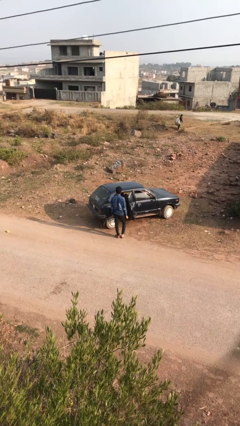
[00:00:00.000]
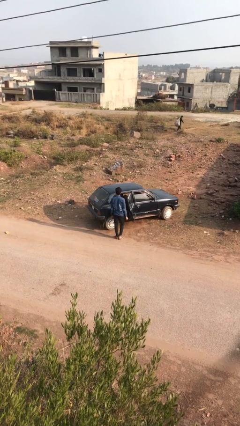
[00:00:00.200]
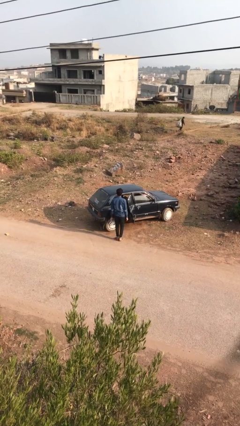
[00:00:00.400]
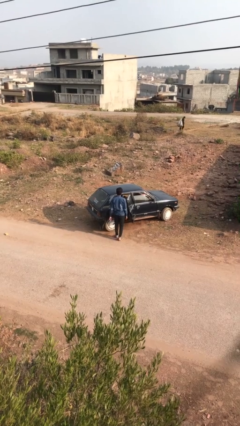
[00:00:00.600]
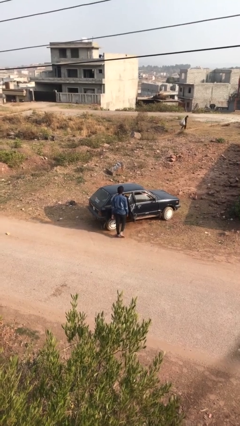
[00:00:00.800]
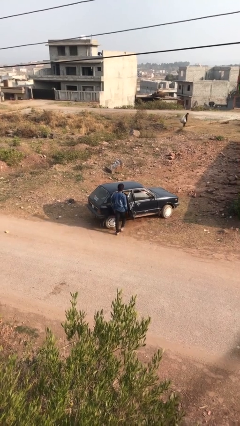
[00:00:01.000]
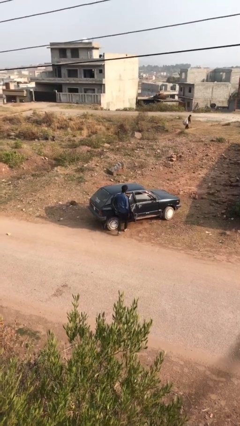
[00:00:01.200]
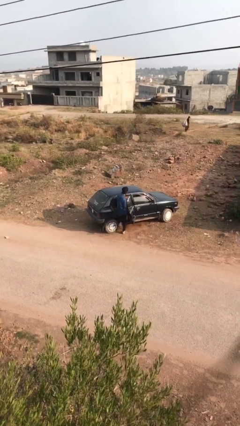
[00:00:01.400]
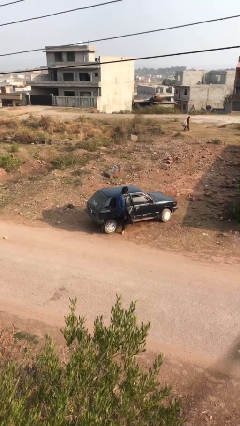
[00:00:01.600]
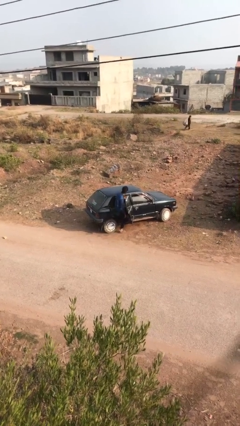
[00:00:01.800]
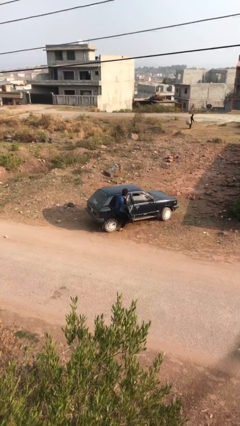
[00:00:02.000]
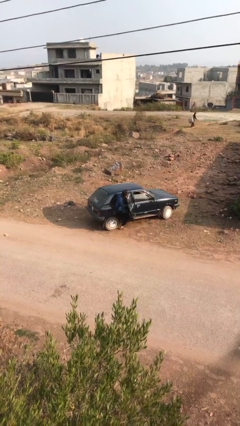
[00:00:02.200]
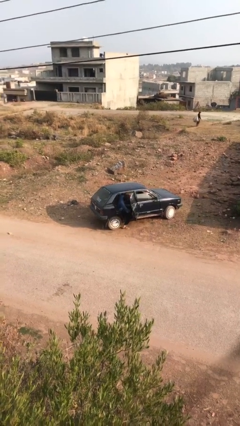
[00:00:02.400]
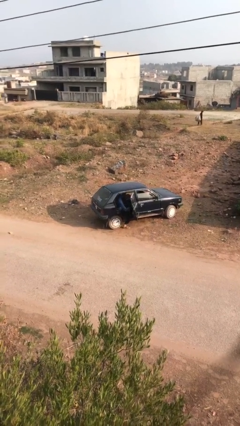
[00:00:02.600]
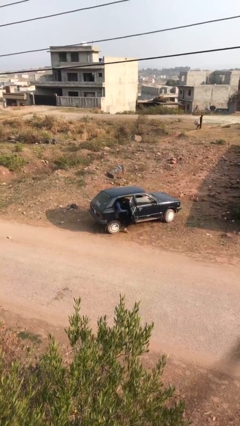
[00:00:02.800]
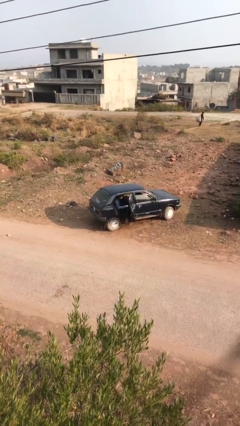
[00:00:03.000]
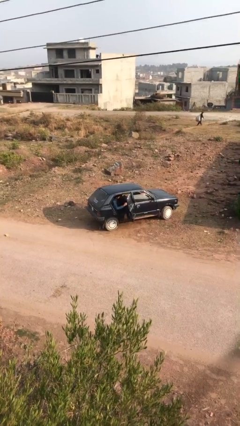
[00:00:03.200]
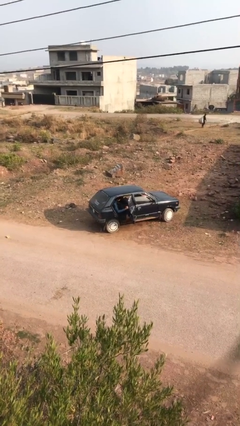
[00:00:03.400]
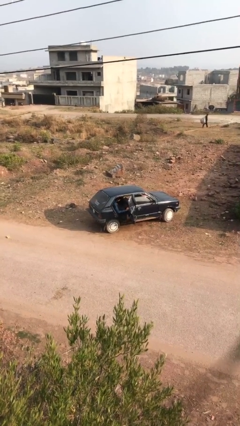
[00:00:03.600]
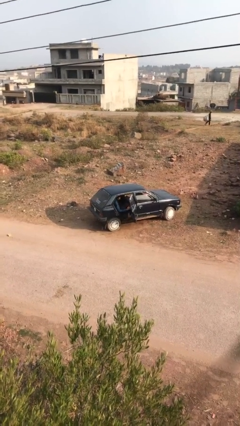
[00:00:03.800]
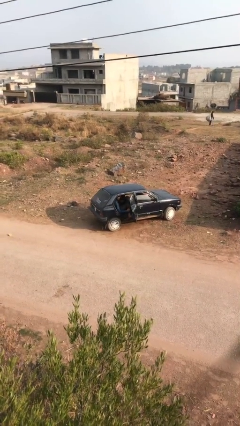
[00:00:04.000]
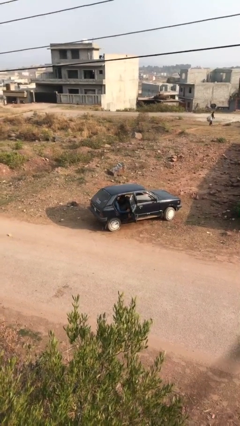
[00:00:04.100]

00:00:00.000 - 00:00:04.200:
person enters car

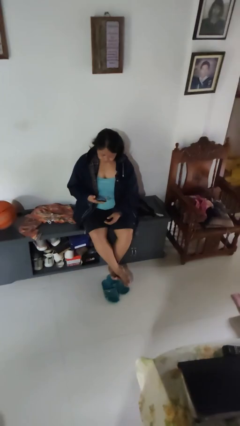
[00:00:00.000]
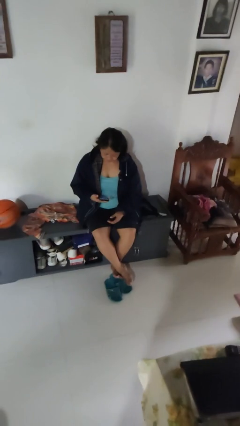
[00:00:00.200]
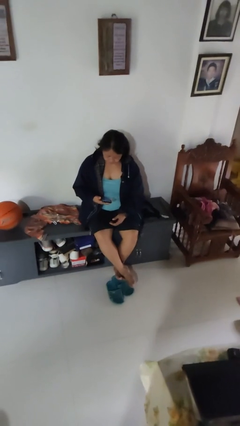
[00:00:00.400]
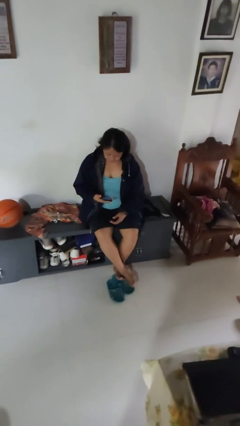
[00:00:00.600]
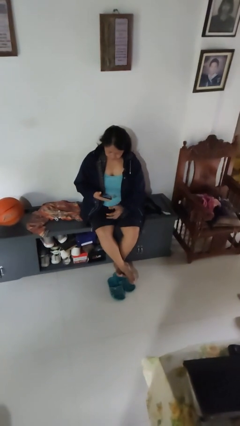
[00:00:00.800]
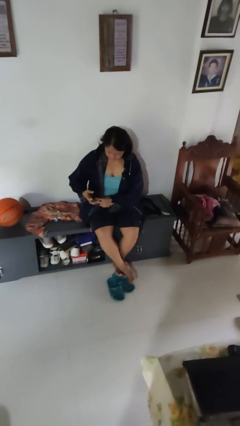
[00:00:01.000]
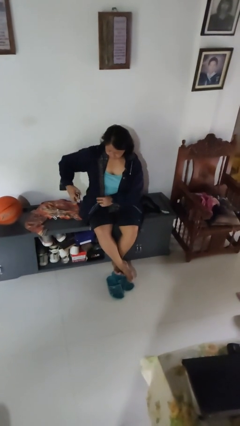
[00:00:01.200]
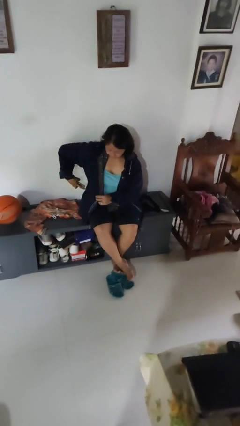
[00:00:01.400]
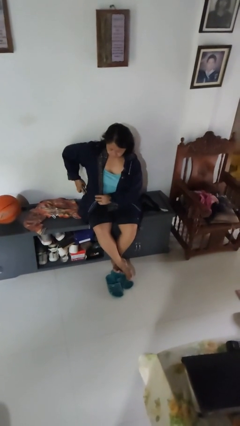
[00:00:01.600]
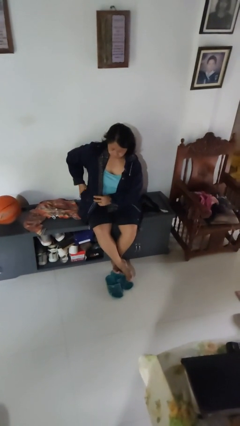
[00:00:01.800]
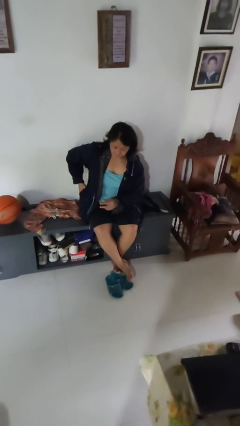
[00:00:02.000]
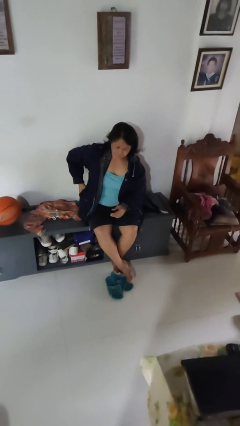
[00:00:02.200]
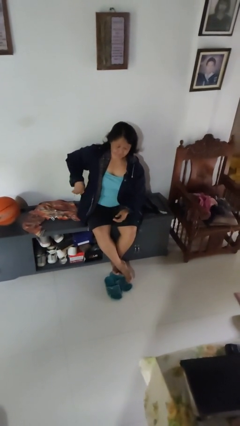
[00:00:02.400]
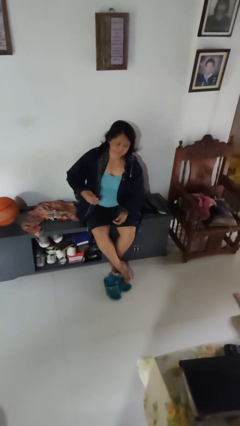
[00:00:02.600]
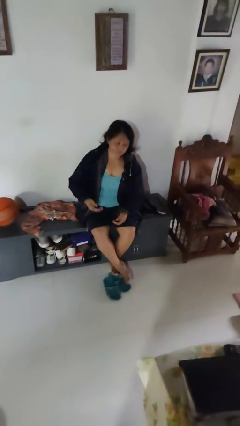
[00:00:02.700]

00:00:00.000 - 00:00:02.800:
person puts phone into pocket

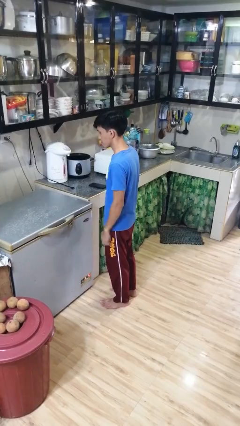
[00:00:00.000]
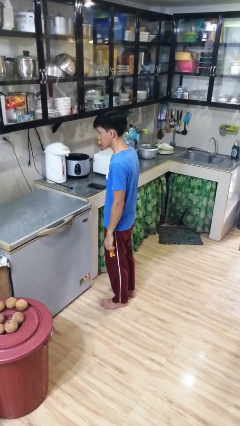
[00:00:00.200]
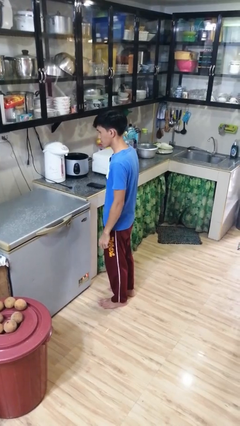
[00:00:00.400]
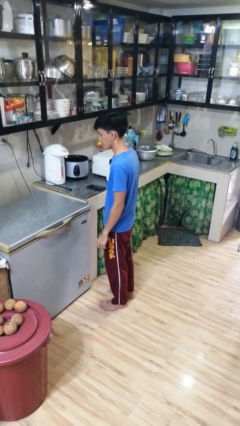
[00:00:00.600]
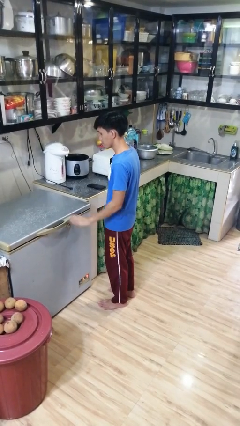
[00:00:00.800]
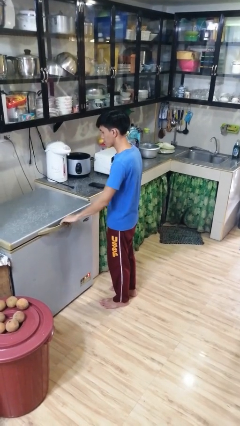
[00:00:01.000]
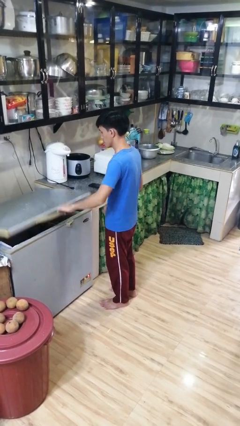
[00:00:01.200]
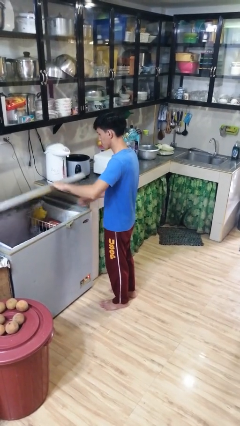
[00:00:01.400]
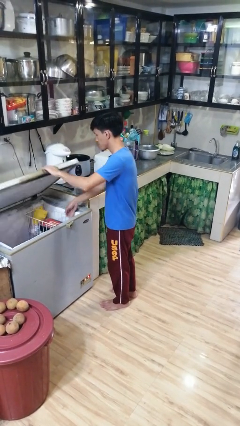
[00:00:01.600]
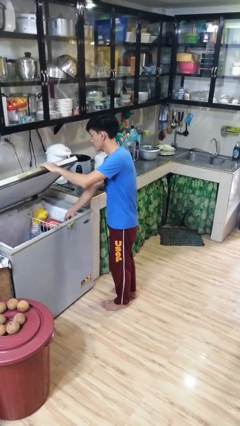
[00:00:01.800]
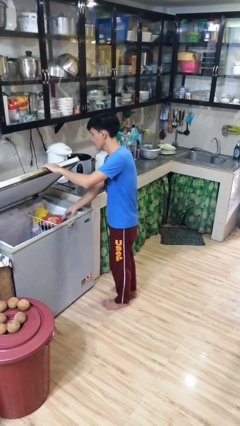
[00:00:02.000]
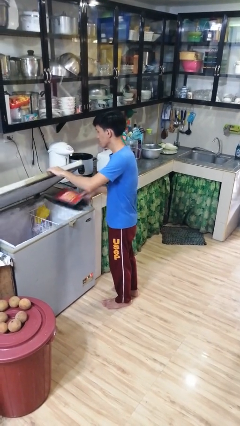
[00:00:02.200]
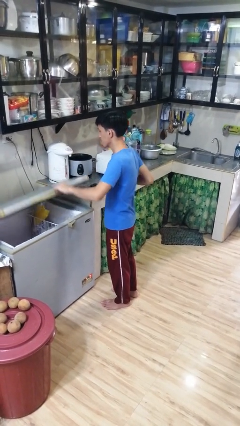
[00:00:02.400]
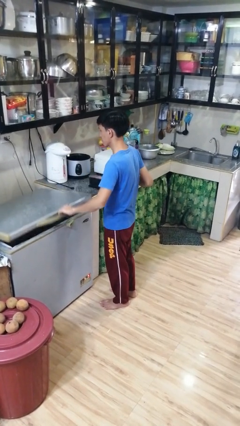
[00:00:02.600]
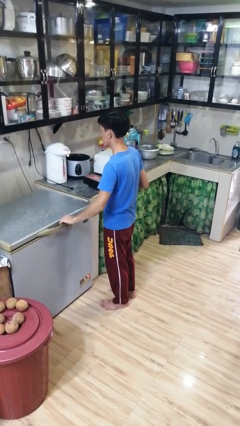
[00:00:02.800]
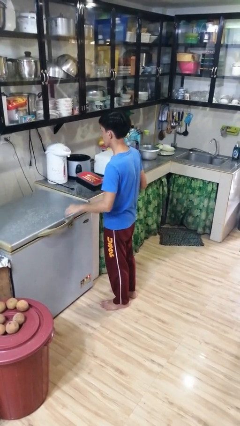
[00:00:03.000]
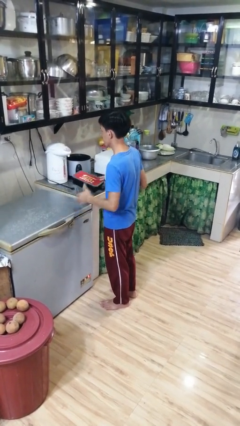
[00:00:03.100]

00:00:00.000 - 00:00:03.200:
person takes object from refrigerator

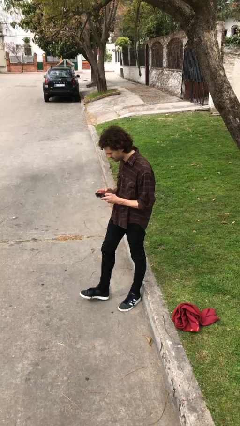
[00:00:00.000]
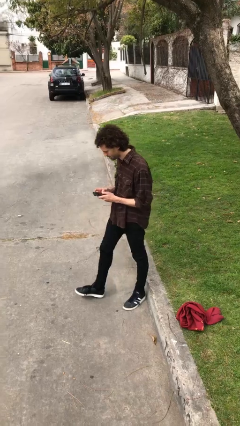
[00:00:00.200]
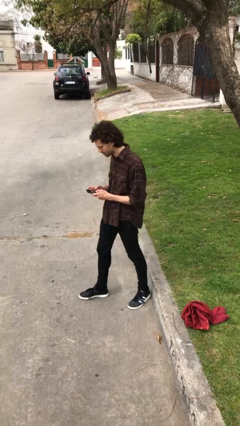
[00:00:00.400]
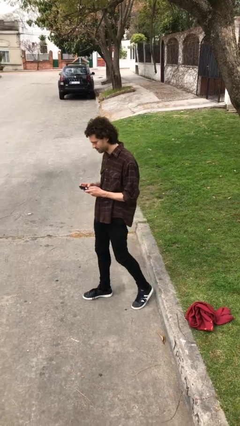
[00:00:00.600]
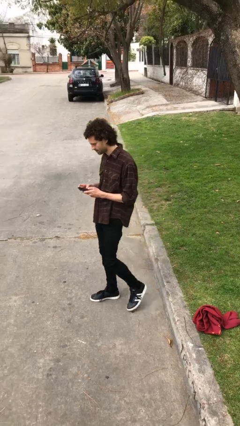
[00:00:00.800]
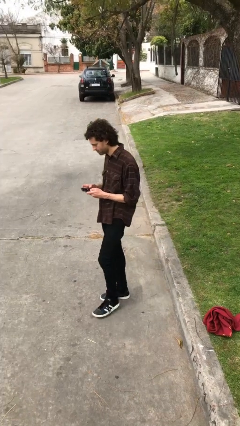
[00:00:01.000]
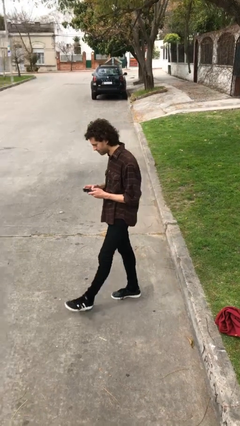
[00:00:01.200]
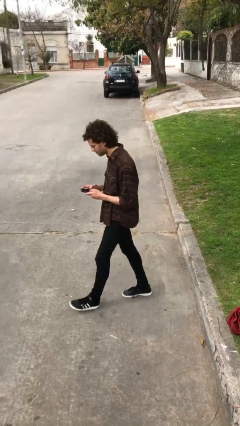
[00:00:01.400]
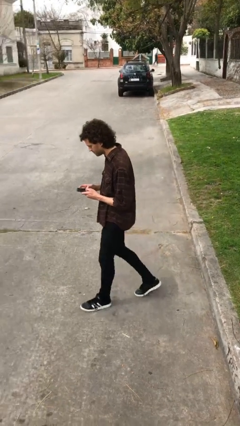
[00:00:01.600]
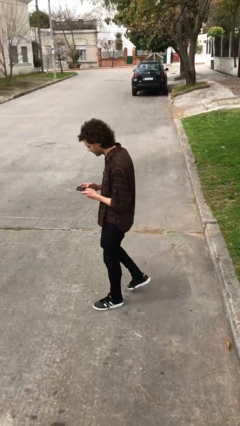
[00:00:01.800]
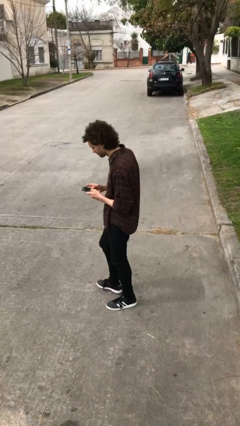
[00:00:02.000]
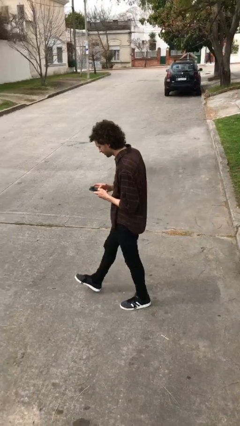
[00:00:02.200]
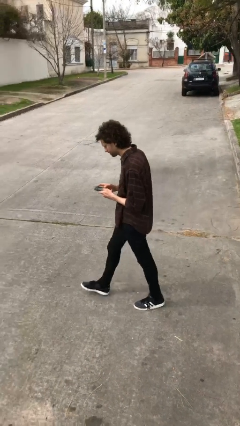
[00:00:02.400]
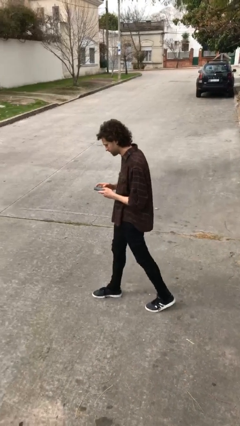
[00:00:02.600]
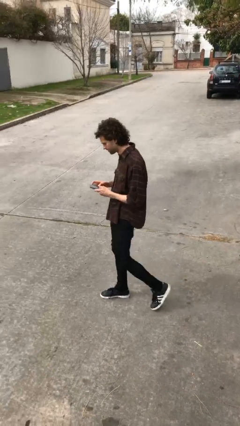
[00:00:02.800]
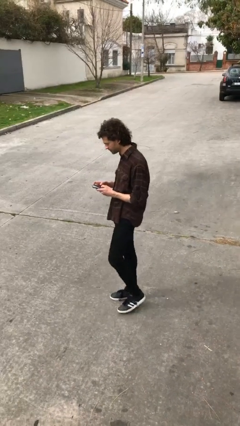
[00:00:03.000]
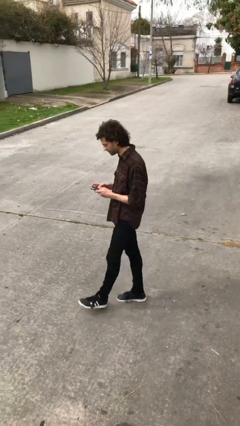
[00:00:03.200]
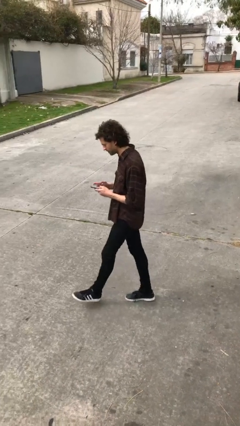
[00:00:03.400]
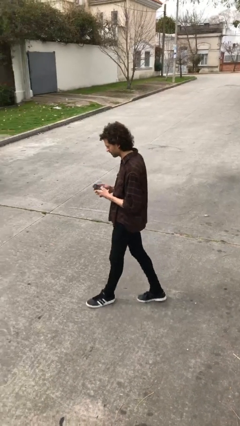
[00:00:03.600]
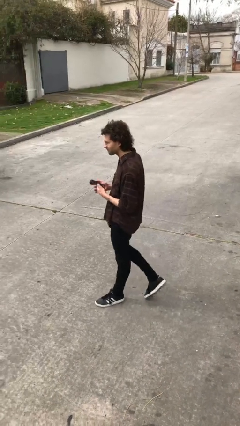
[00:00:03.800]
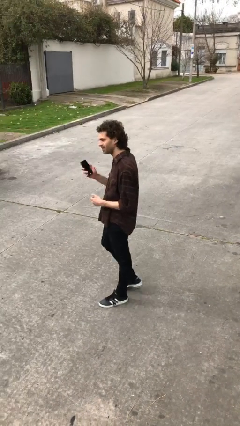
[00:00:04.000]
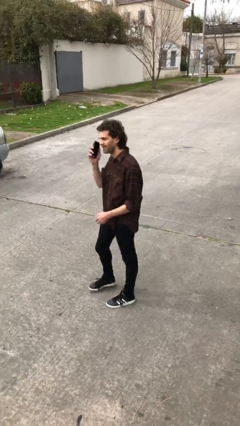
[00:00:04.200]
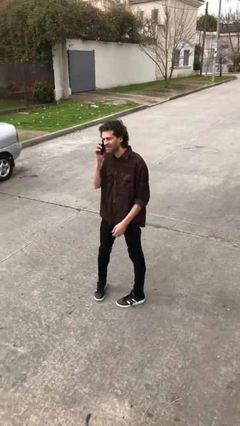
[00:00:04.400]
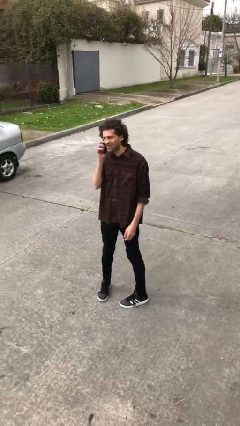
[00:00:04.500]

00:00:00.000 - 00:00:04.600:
person texts on phone

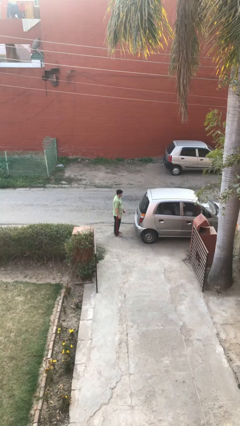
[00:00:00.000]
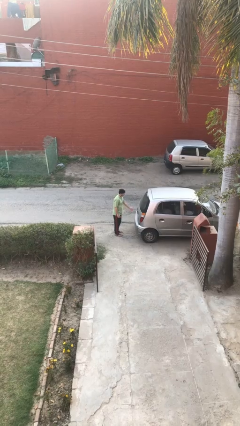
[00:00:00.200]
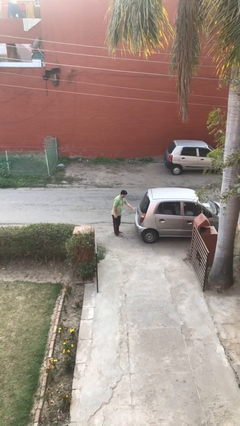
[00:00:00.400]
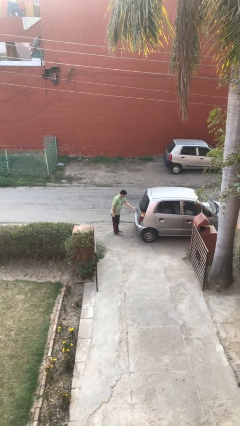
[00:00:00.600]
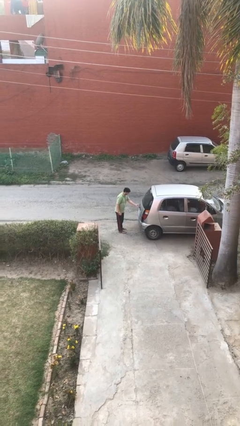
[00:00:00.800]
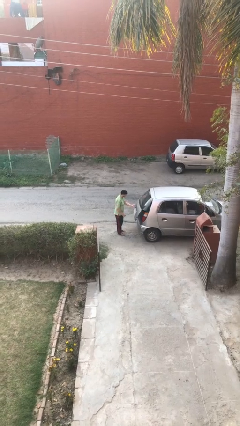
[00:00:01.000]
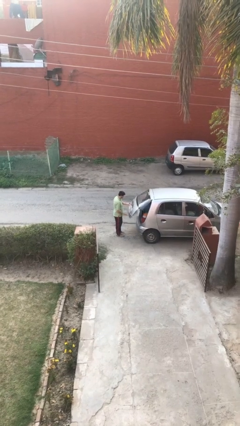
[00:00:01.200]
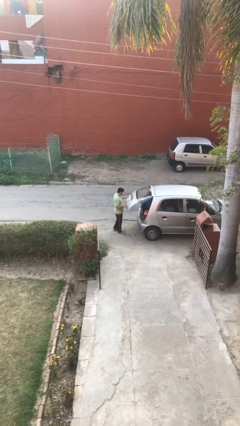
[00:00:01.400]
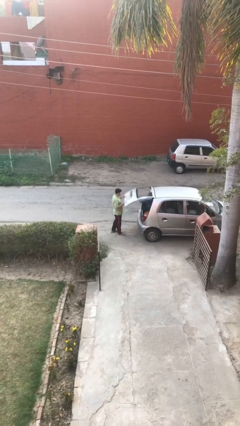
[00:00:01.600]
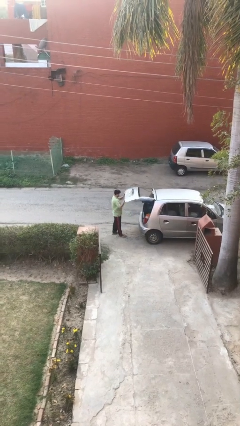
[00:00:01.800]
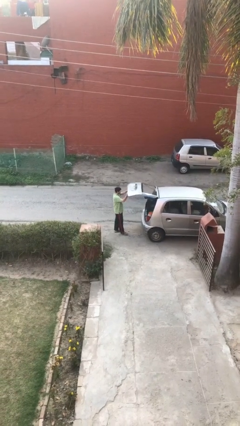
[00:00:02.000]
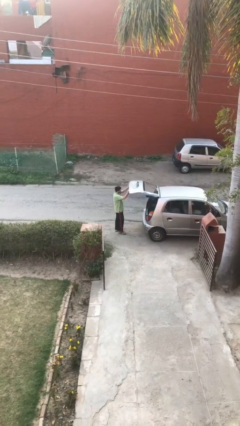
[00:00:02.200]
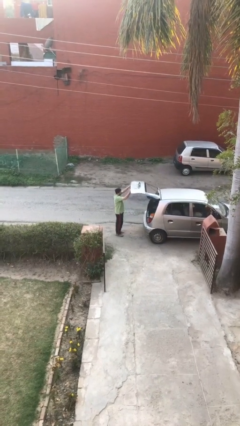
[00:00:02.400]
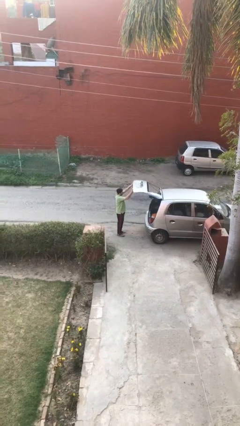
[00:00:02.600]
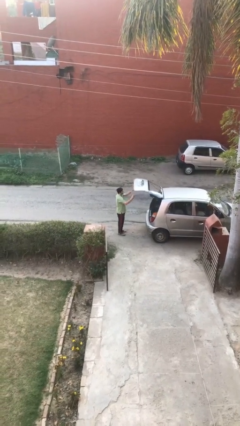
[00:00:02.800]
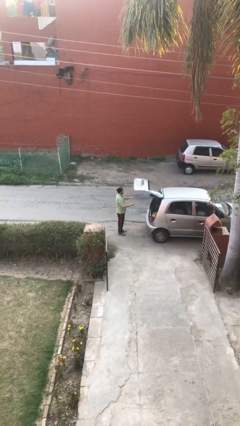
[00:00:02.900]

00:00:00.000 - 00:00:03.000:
person opens car trunk
